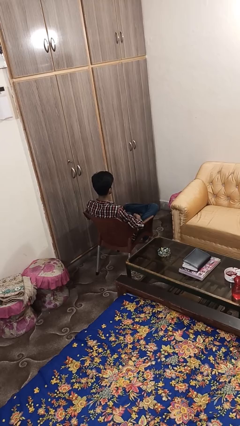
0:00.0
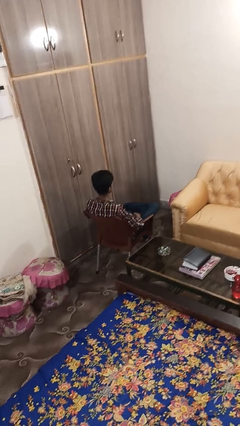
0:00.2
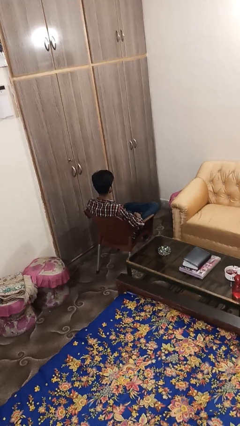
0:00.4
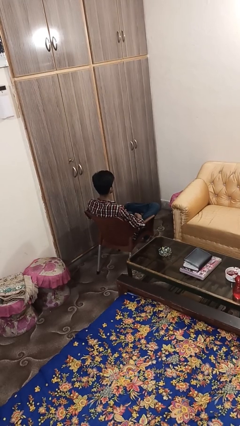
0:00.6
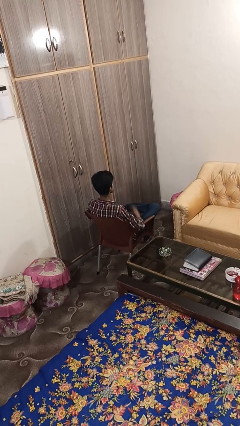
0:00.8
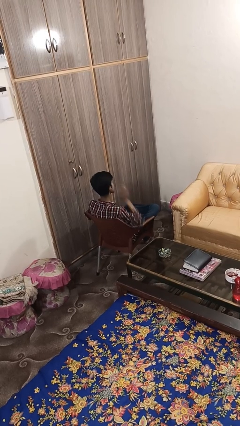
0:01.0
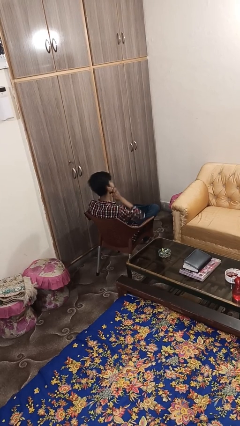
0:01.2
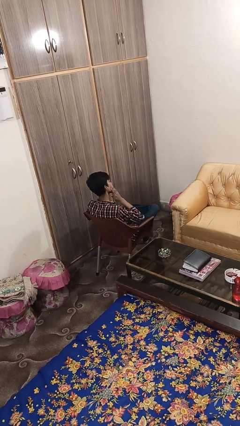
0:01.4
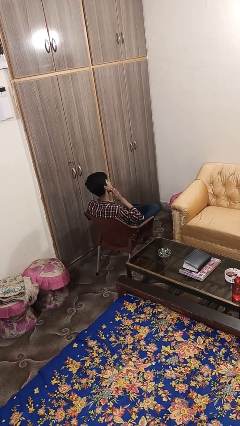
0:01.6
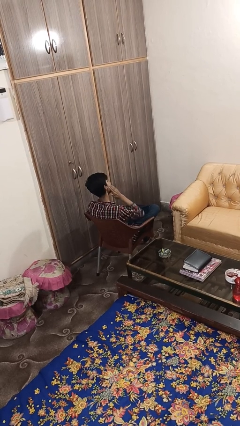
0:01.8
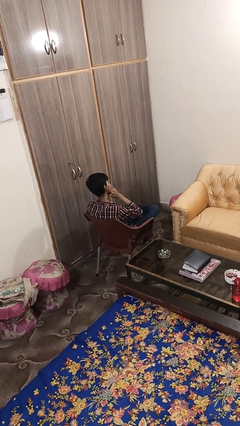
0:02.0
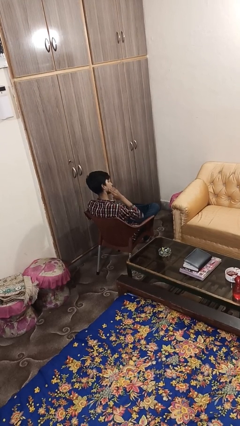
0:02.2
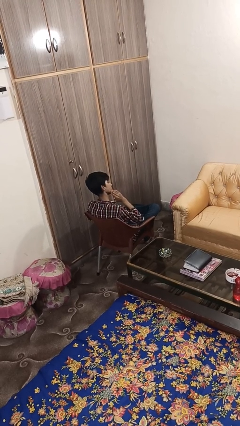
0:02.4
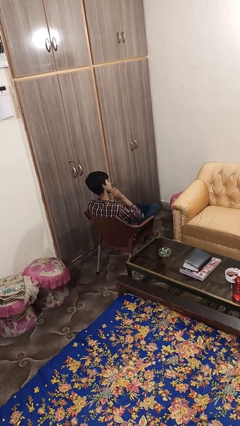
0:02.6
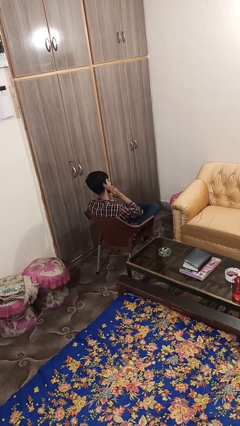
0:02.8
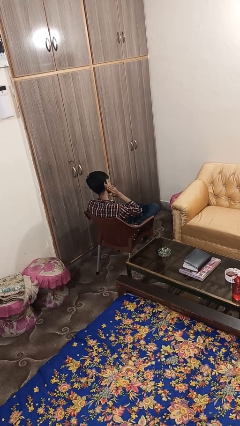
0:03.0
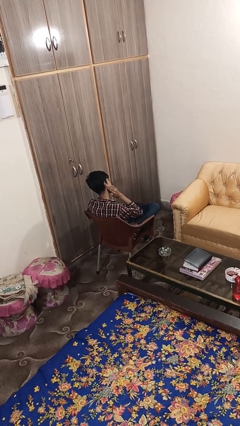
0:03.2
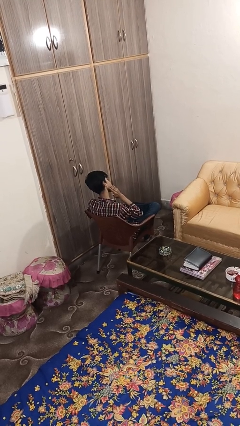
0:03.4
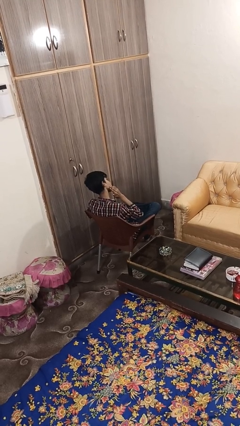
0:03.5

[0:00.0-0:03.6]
person swats bug

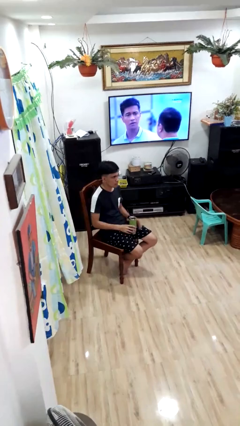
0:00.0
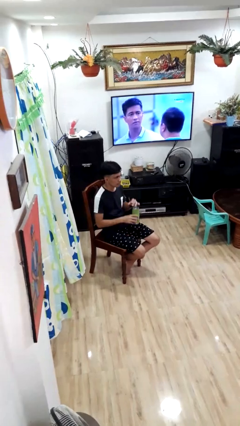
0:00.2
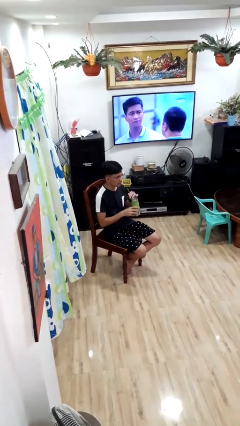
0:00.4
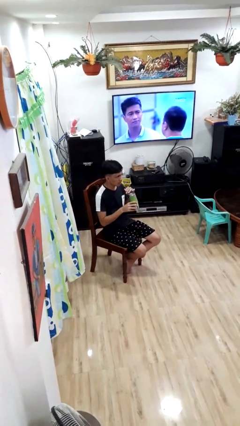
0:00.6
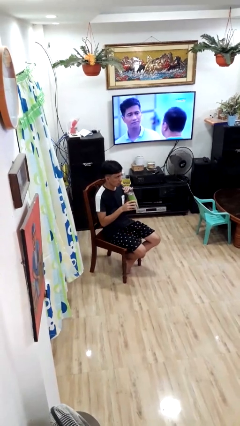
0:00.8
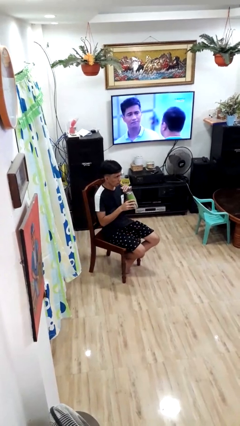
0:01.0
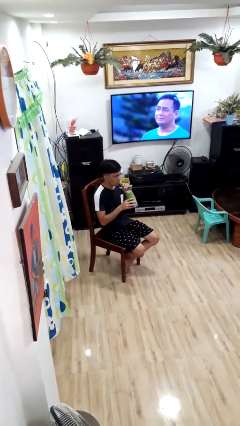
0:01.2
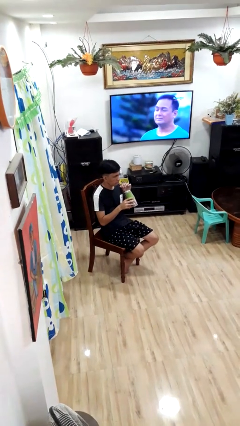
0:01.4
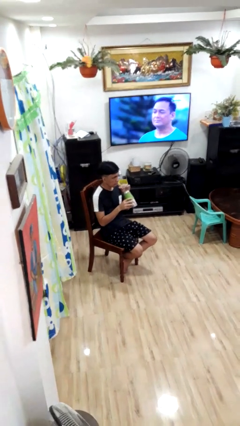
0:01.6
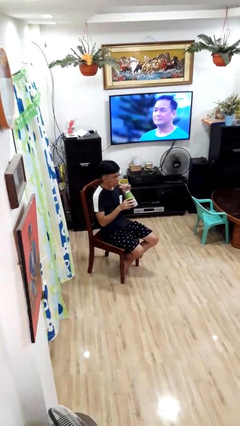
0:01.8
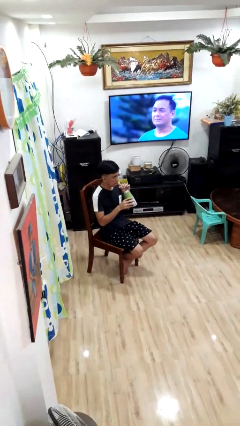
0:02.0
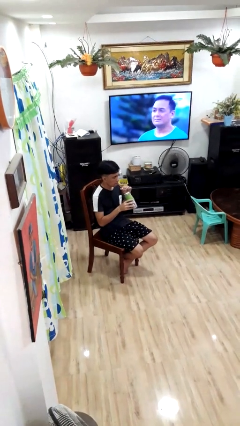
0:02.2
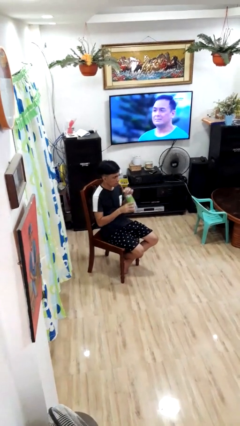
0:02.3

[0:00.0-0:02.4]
person wipes mouth with napkin

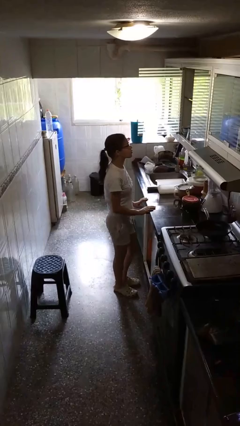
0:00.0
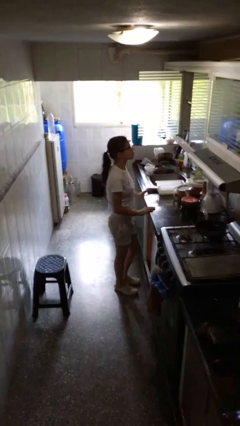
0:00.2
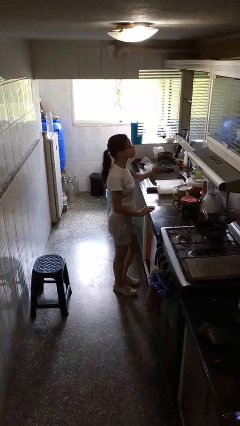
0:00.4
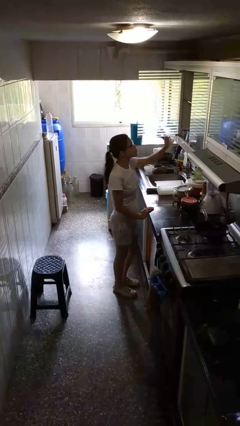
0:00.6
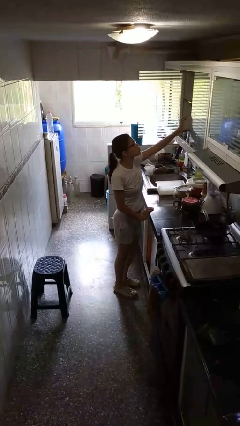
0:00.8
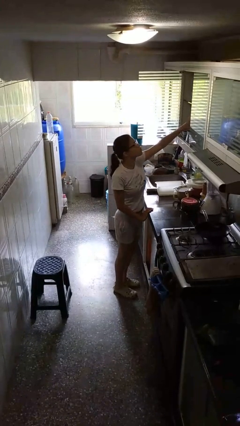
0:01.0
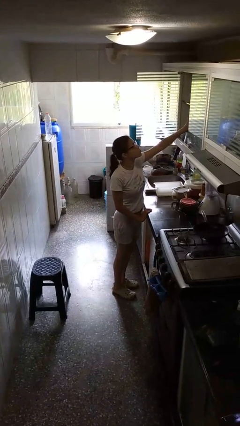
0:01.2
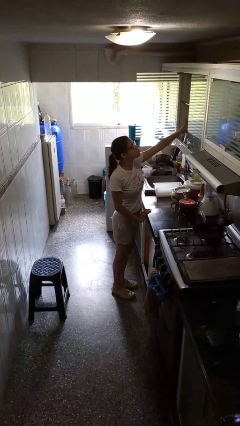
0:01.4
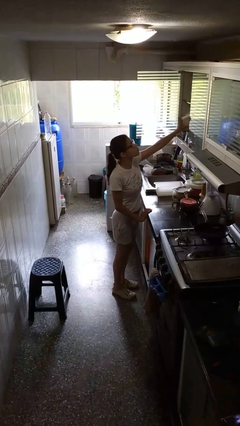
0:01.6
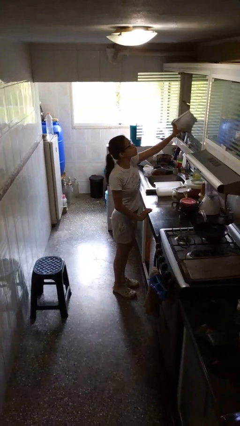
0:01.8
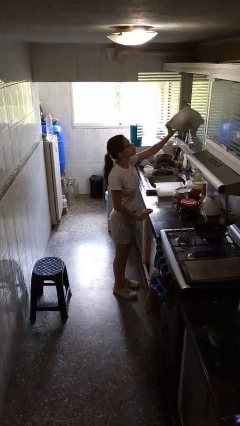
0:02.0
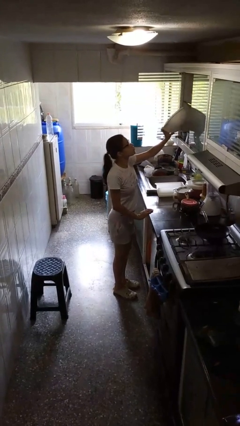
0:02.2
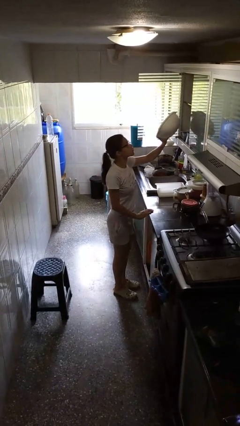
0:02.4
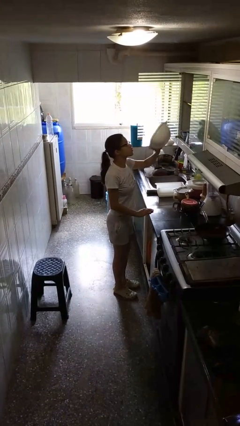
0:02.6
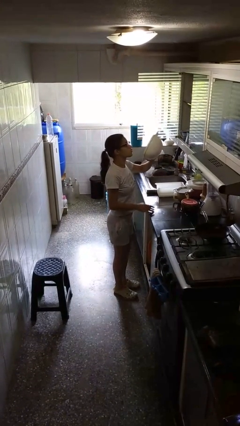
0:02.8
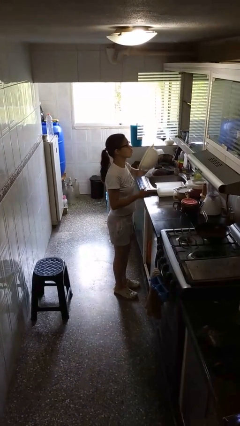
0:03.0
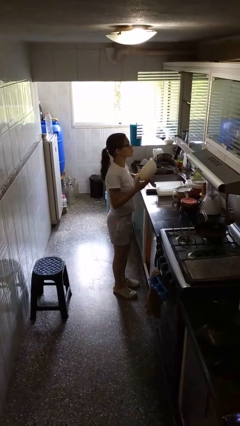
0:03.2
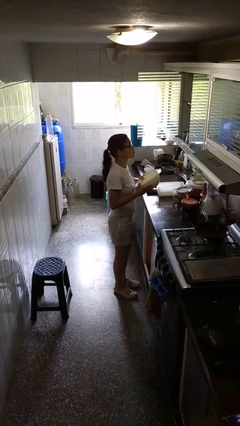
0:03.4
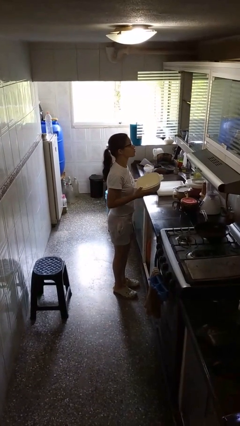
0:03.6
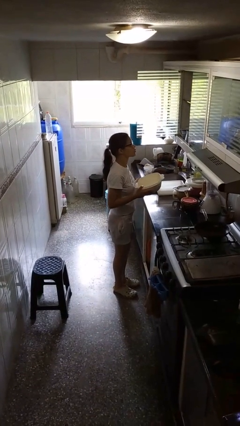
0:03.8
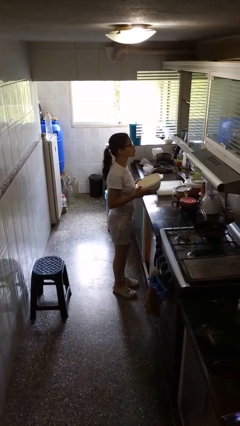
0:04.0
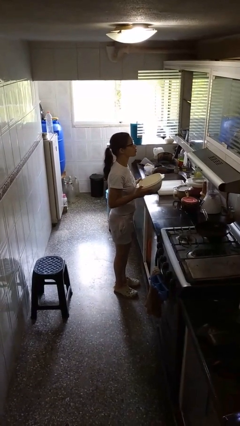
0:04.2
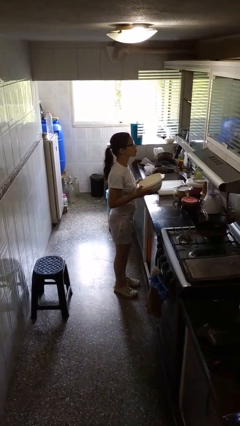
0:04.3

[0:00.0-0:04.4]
person picks up object from cabinet

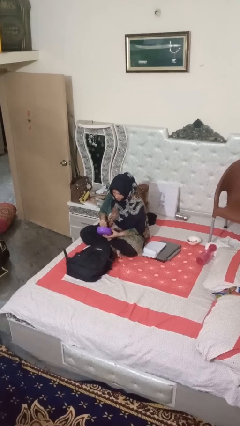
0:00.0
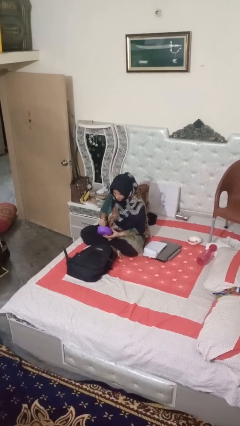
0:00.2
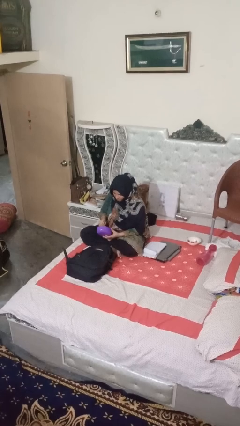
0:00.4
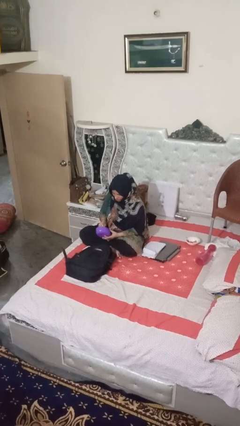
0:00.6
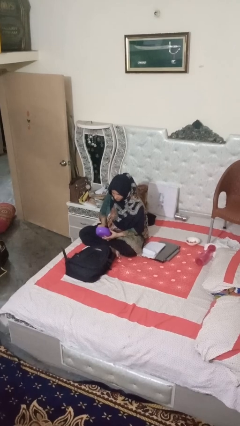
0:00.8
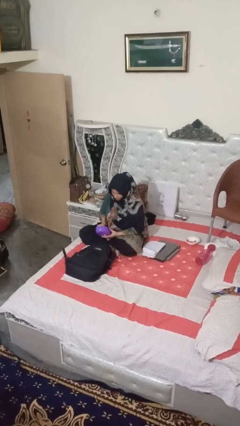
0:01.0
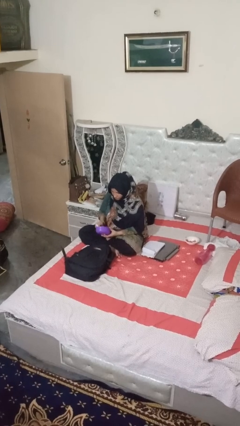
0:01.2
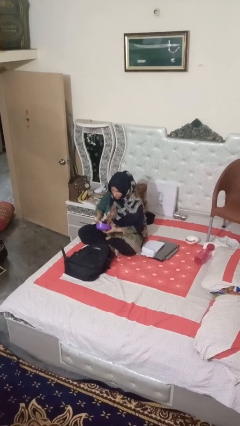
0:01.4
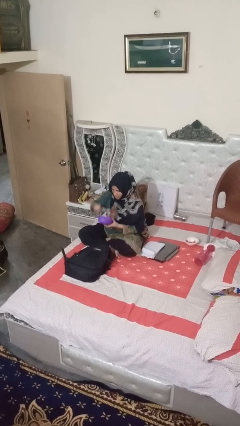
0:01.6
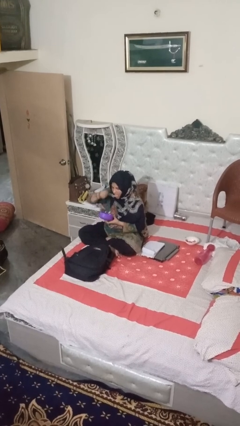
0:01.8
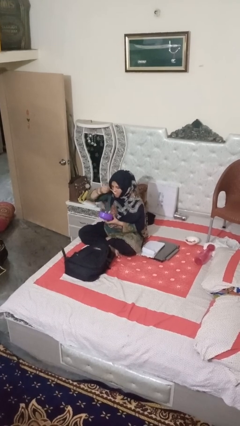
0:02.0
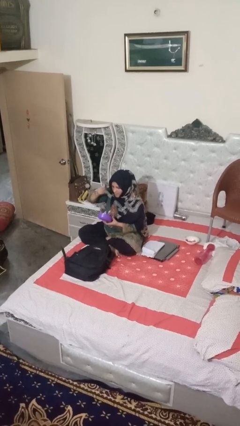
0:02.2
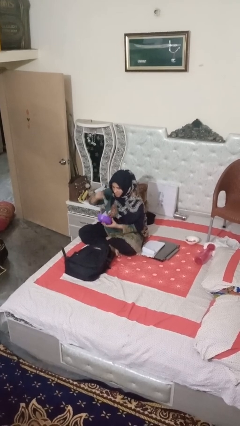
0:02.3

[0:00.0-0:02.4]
person eats snack from bag

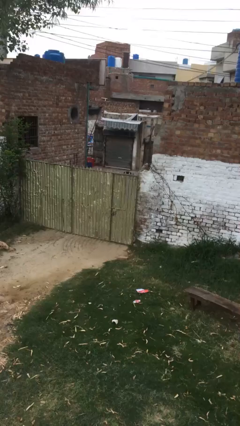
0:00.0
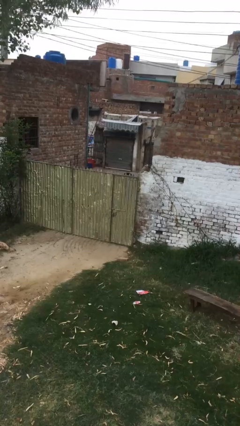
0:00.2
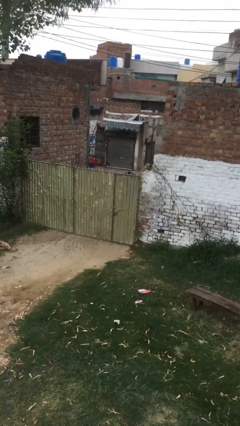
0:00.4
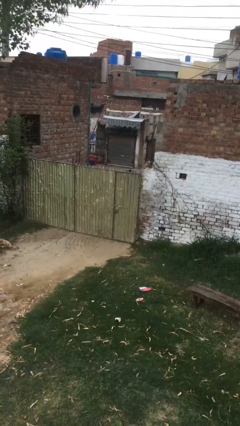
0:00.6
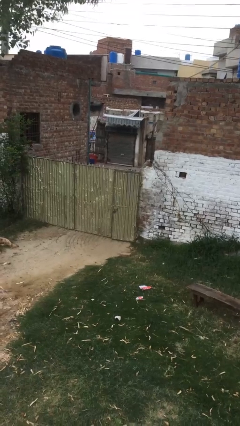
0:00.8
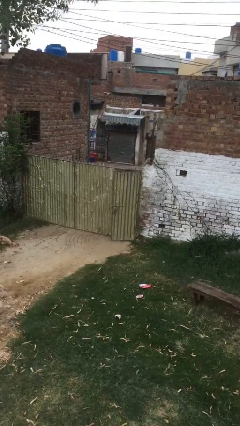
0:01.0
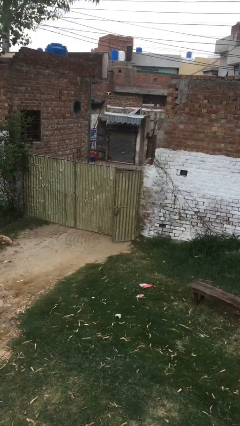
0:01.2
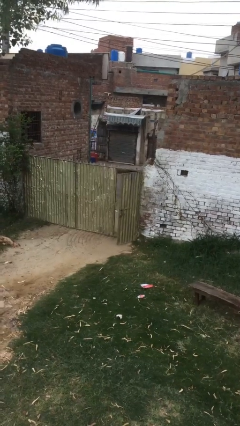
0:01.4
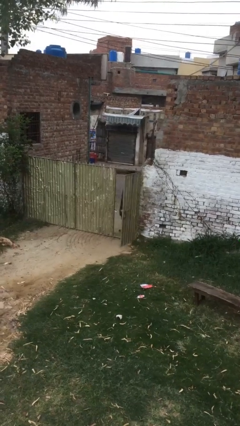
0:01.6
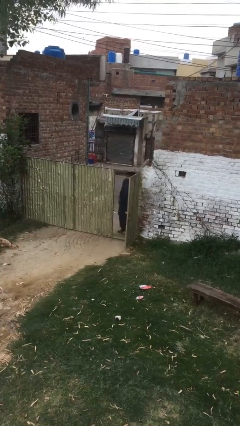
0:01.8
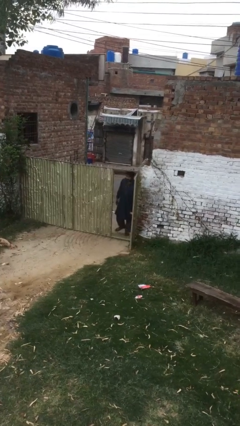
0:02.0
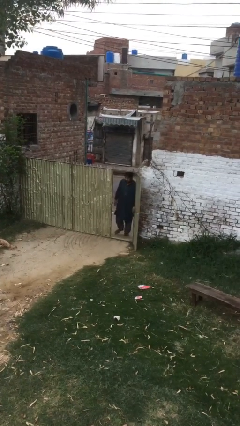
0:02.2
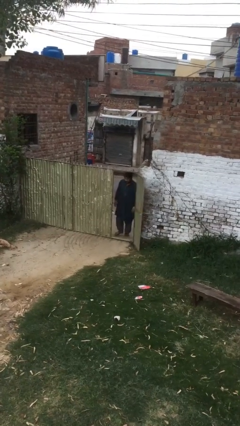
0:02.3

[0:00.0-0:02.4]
person opens facility door

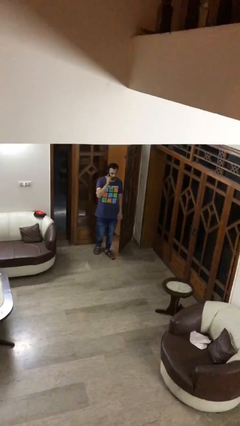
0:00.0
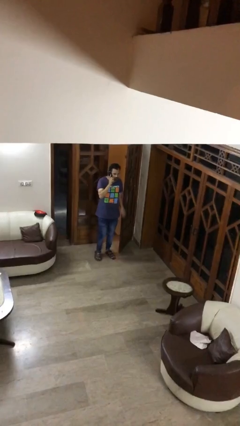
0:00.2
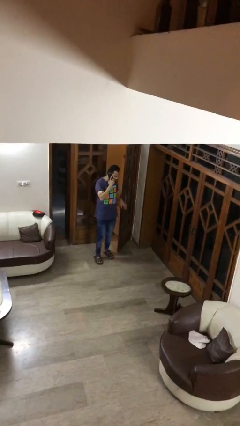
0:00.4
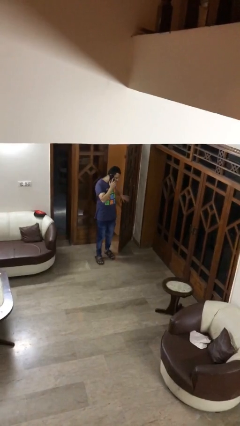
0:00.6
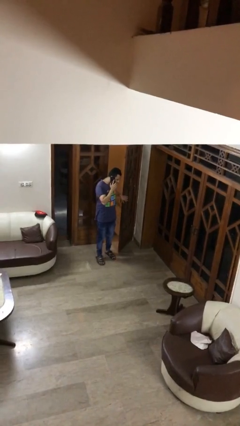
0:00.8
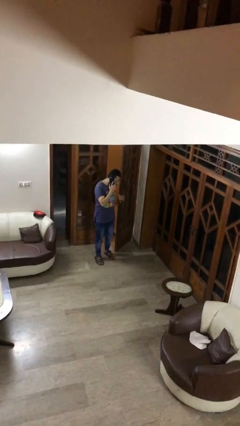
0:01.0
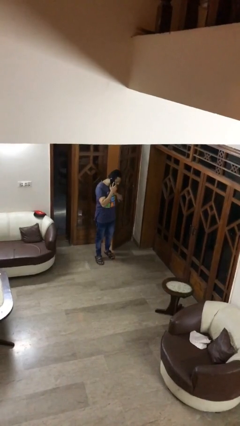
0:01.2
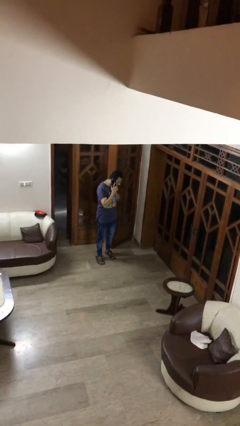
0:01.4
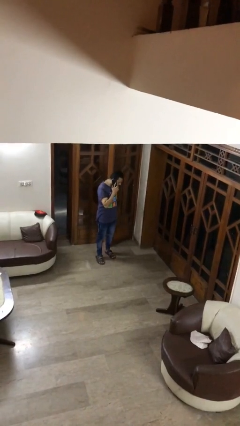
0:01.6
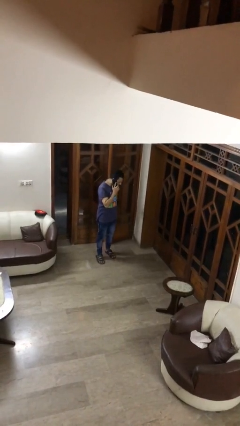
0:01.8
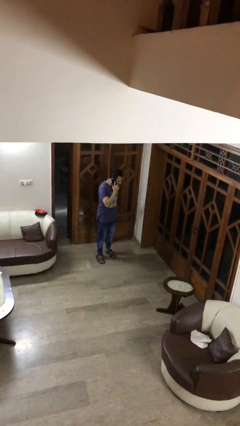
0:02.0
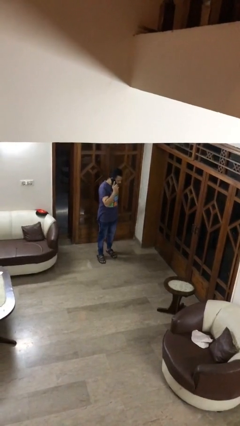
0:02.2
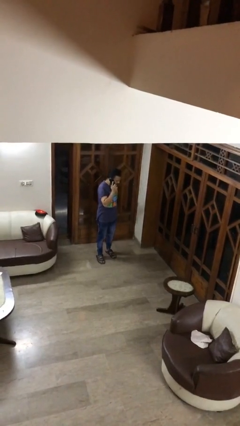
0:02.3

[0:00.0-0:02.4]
person closes facility door
